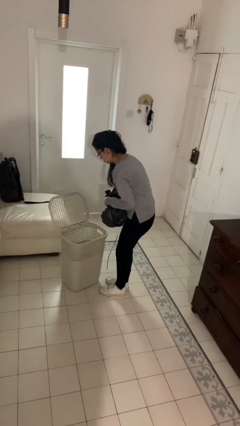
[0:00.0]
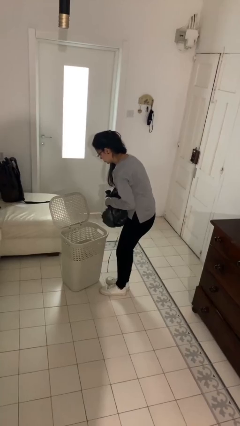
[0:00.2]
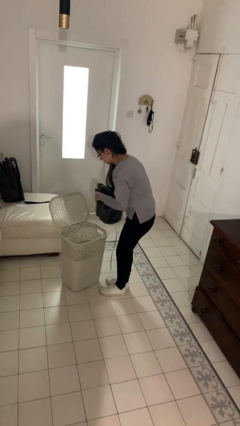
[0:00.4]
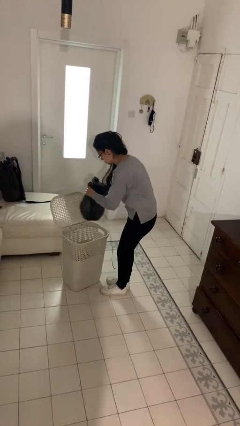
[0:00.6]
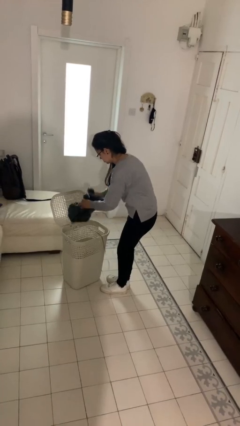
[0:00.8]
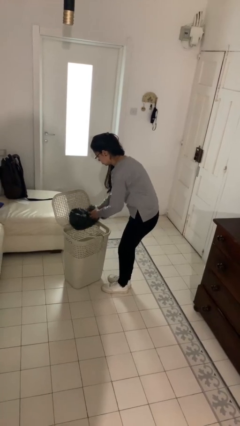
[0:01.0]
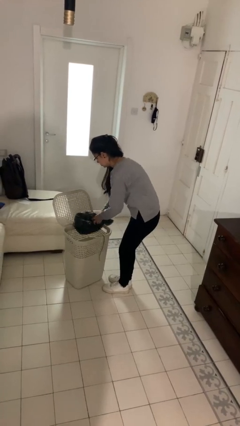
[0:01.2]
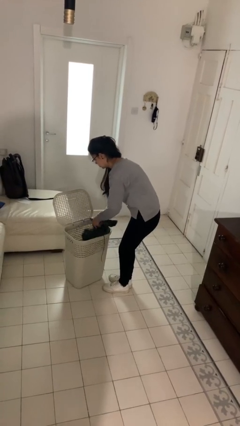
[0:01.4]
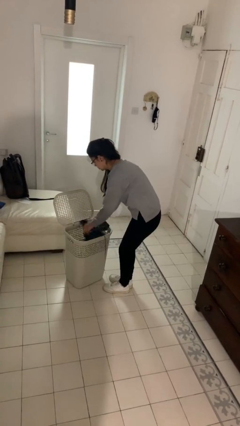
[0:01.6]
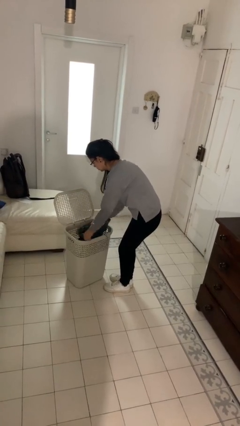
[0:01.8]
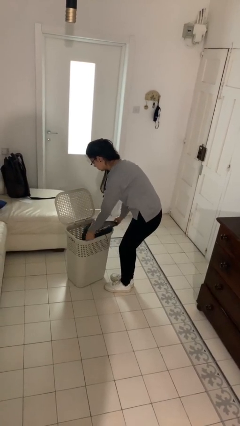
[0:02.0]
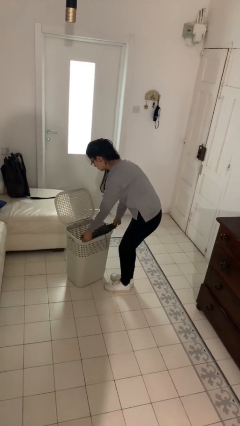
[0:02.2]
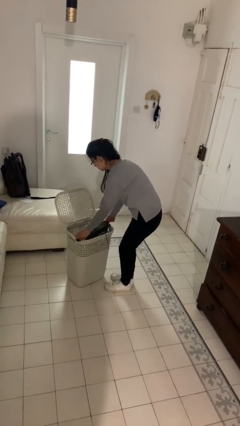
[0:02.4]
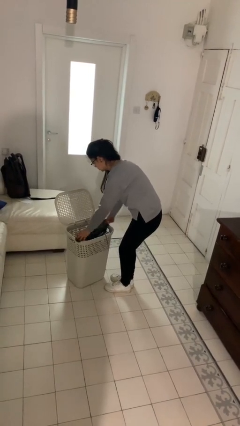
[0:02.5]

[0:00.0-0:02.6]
person inserts trashbag into trashcan

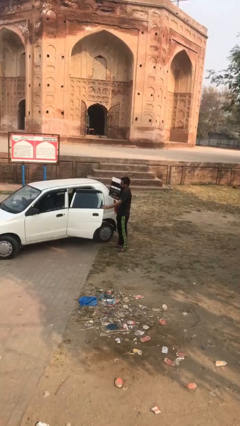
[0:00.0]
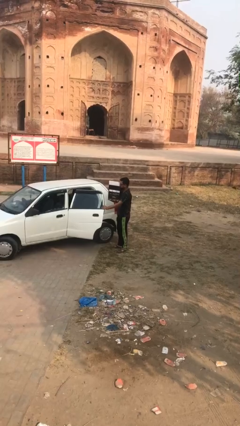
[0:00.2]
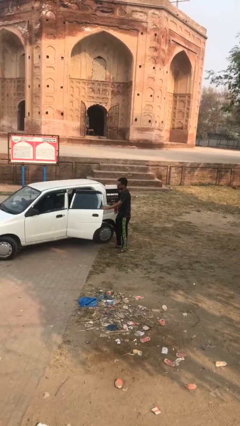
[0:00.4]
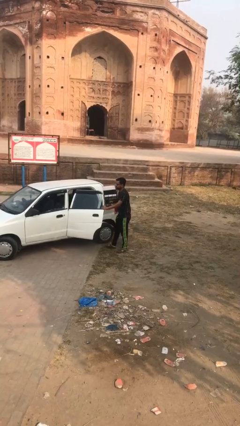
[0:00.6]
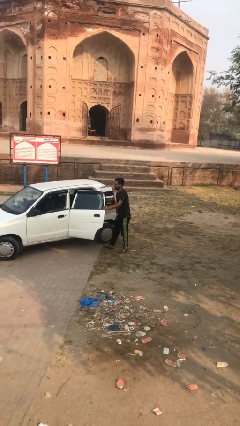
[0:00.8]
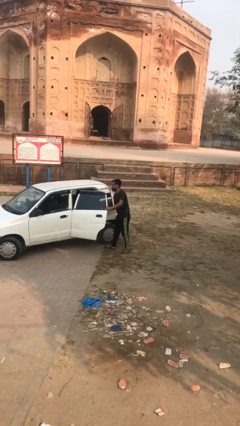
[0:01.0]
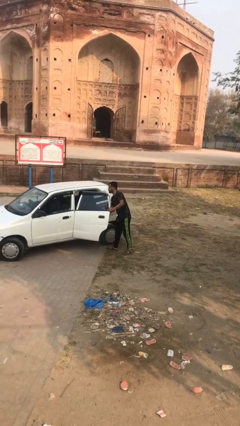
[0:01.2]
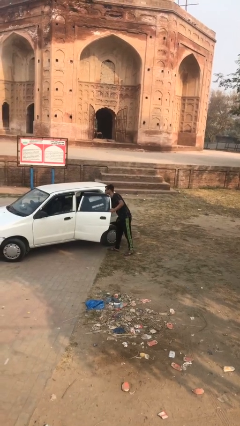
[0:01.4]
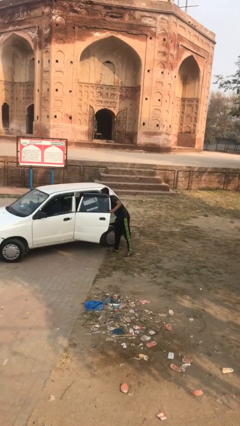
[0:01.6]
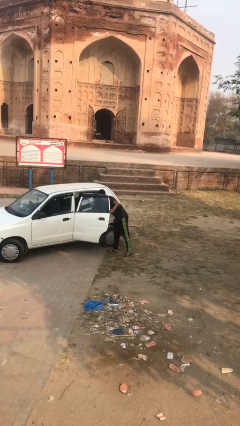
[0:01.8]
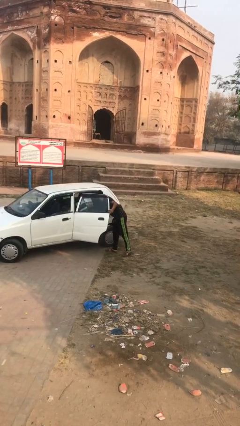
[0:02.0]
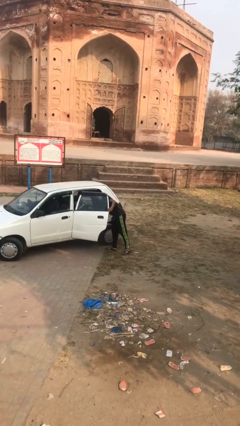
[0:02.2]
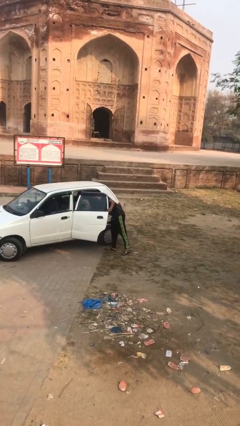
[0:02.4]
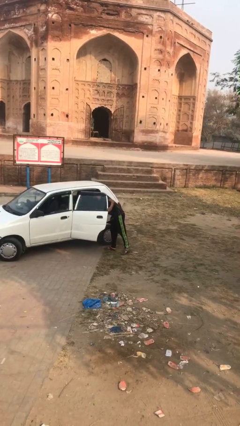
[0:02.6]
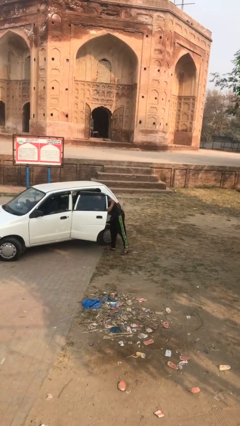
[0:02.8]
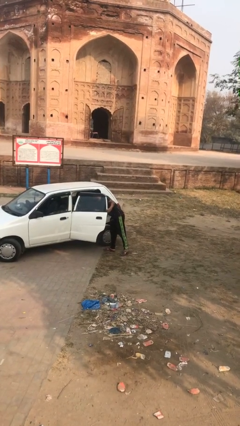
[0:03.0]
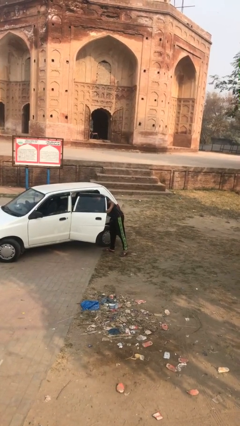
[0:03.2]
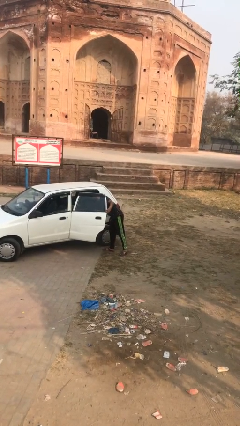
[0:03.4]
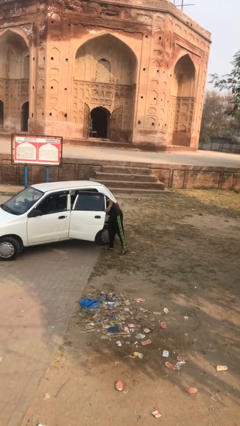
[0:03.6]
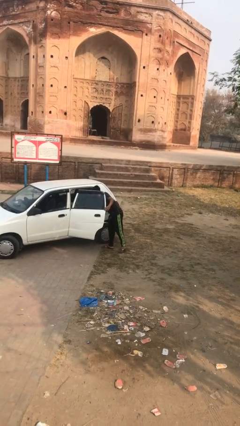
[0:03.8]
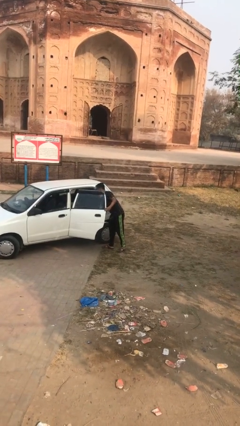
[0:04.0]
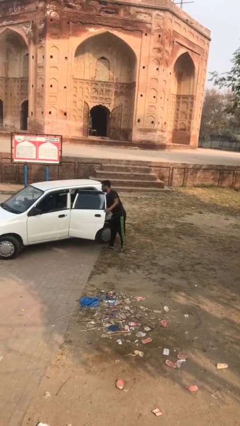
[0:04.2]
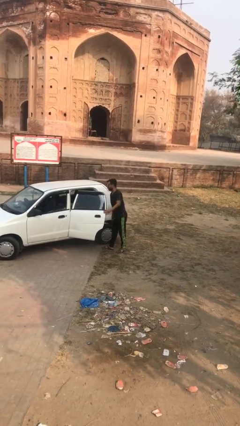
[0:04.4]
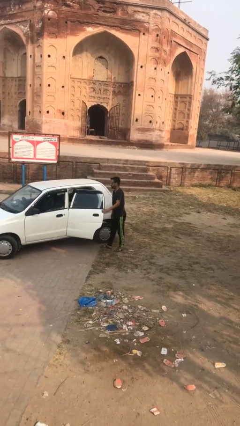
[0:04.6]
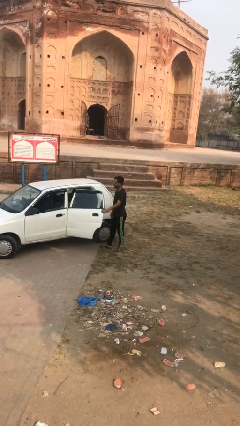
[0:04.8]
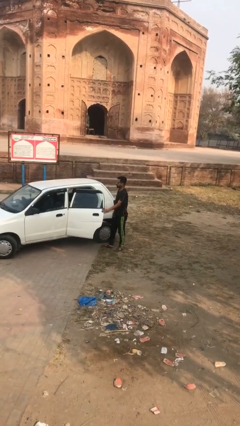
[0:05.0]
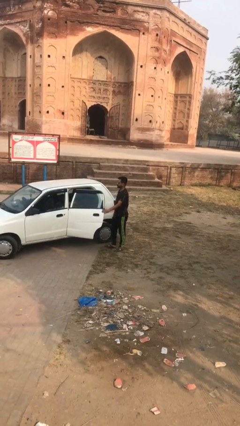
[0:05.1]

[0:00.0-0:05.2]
person loads car

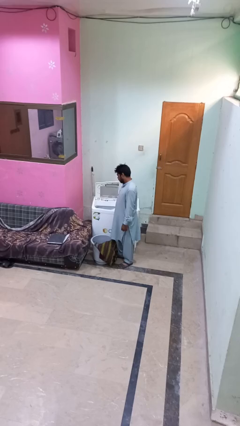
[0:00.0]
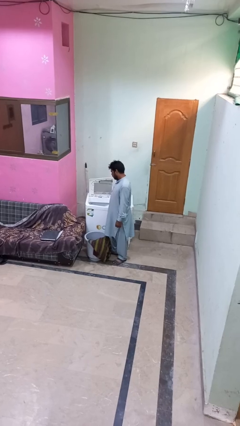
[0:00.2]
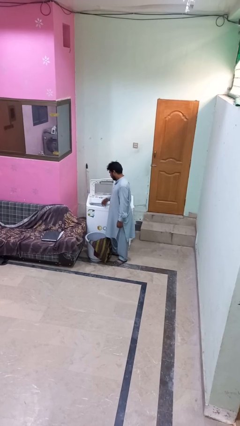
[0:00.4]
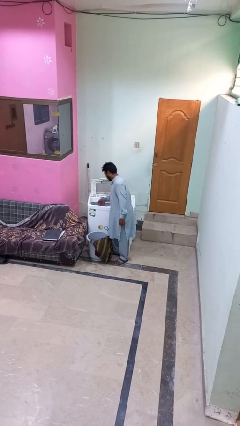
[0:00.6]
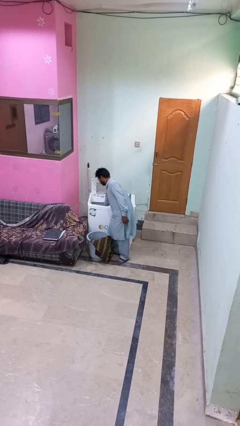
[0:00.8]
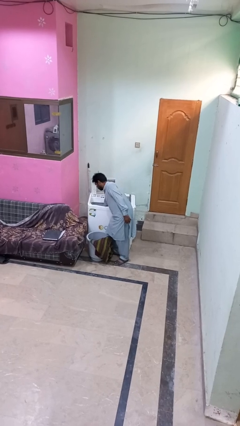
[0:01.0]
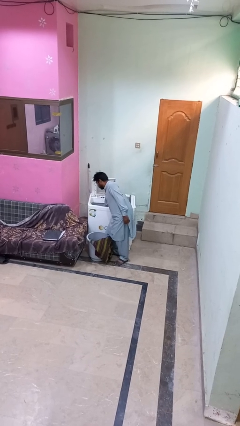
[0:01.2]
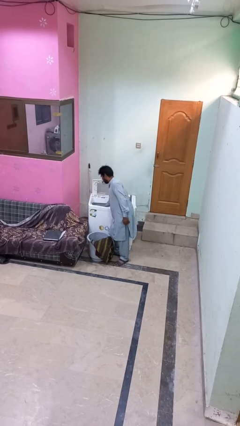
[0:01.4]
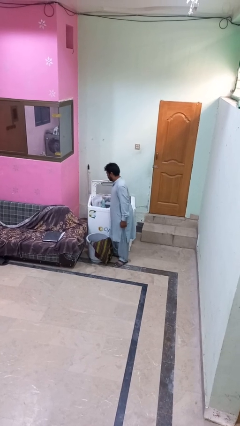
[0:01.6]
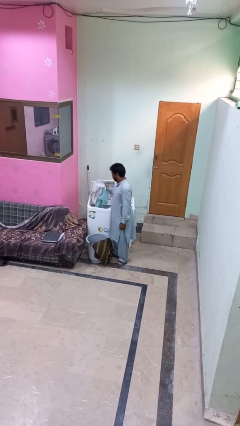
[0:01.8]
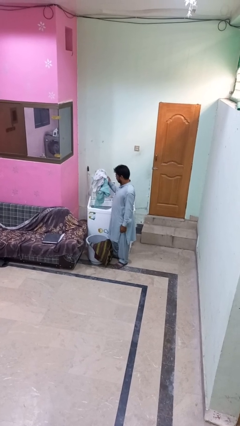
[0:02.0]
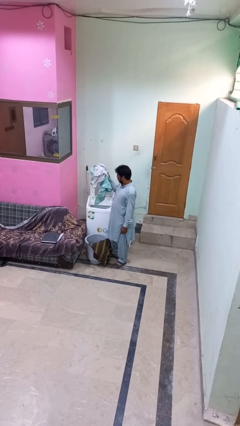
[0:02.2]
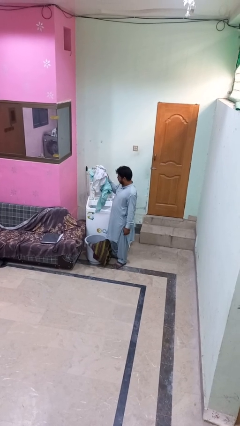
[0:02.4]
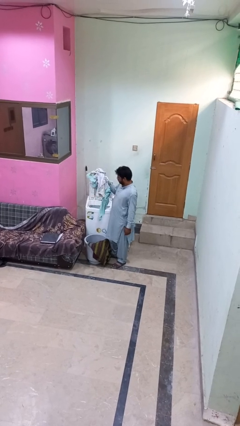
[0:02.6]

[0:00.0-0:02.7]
person unloads clotheswasher

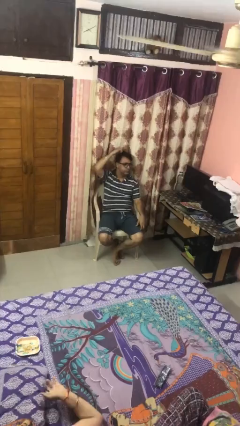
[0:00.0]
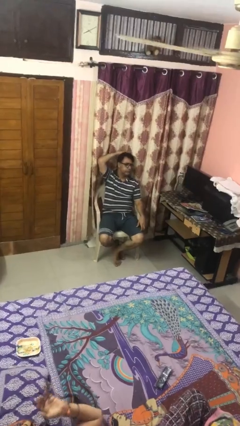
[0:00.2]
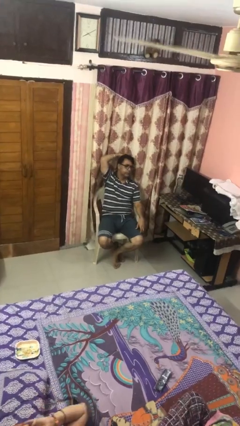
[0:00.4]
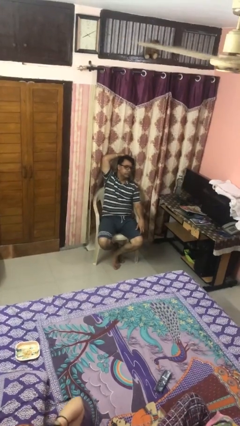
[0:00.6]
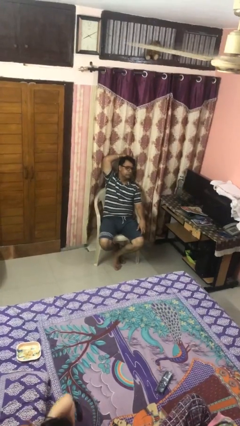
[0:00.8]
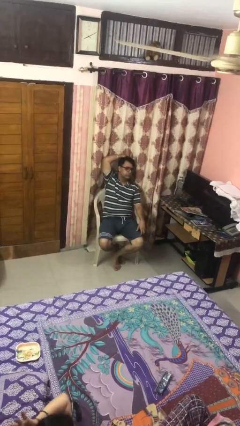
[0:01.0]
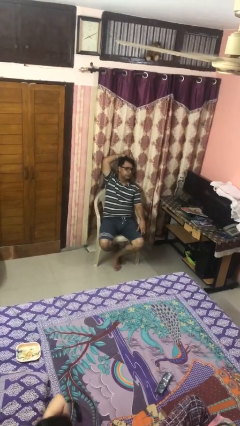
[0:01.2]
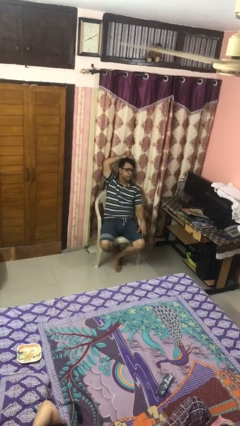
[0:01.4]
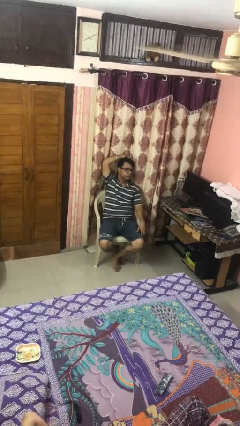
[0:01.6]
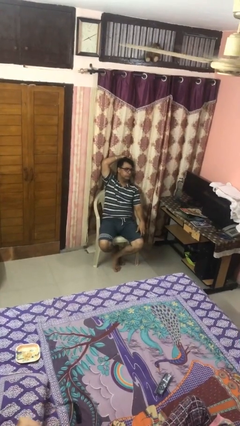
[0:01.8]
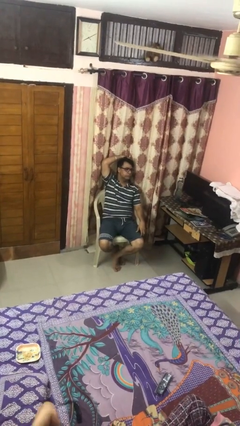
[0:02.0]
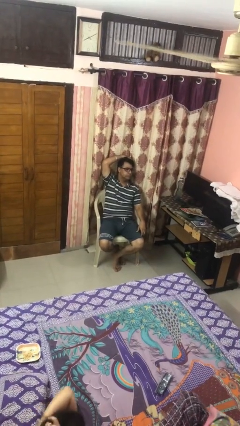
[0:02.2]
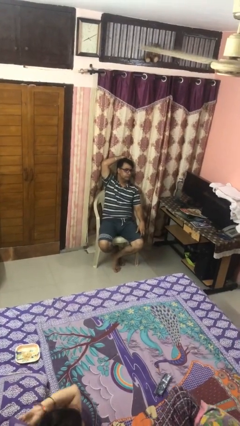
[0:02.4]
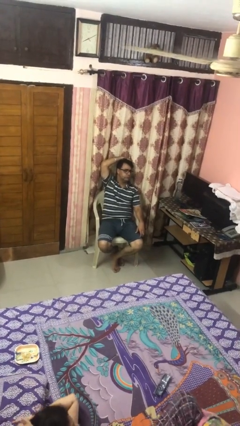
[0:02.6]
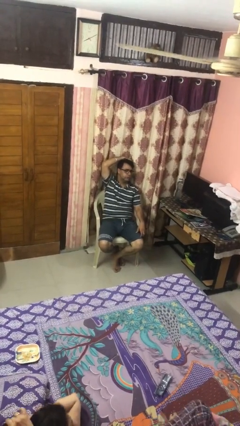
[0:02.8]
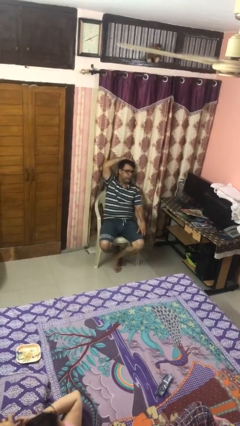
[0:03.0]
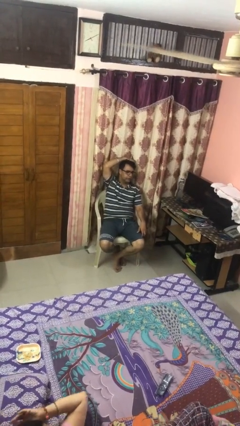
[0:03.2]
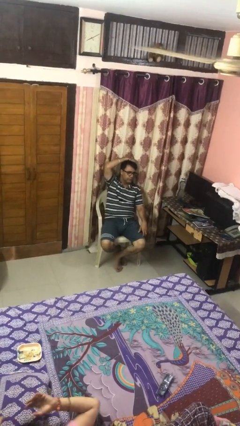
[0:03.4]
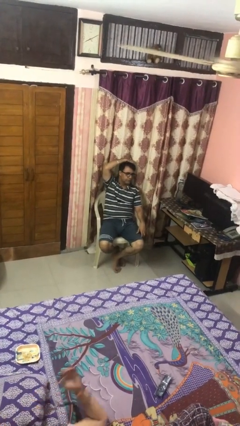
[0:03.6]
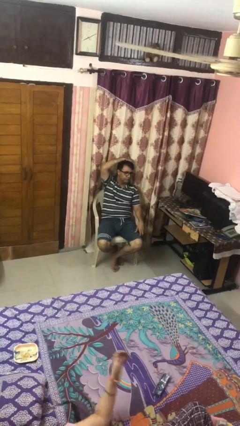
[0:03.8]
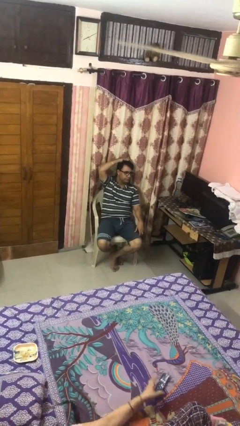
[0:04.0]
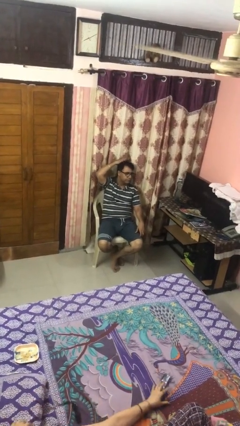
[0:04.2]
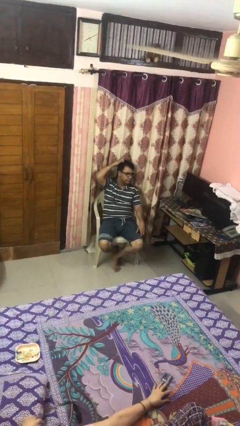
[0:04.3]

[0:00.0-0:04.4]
person scratches face

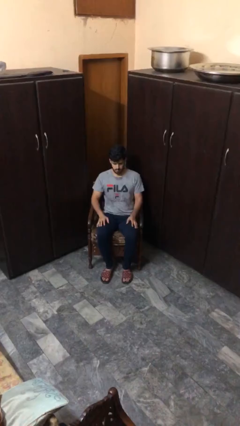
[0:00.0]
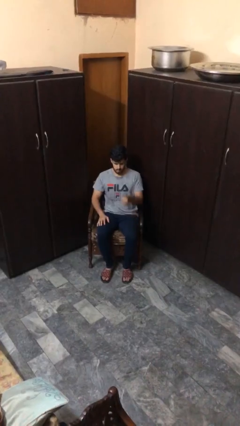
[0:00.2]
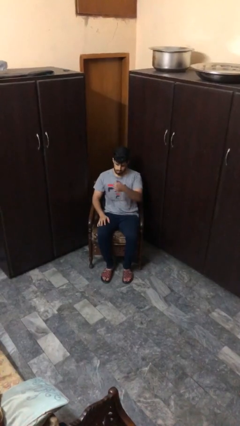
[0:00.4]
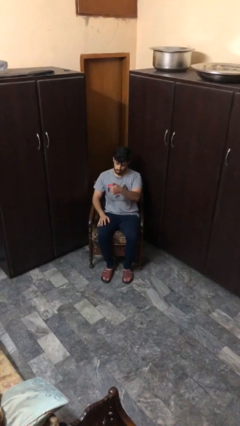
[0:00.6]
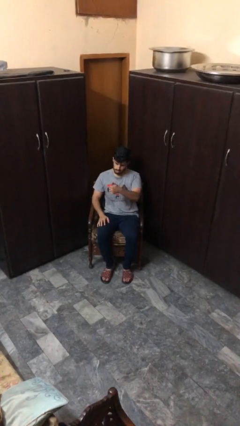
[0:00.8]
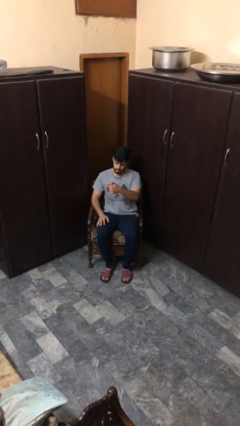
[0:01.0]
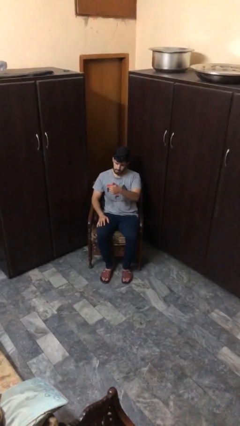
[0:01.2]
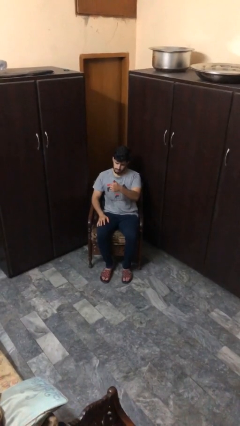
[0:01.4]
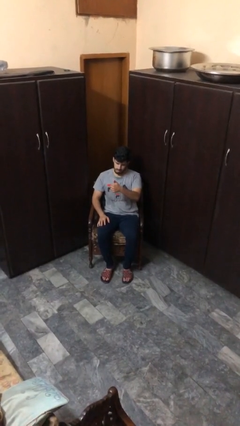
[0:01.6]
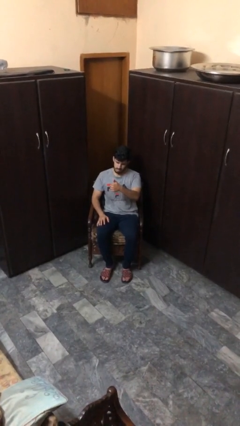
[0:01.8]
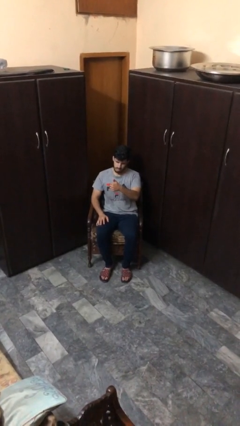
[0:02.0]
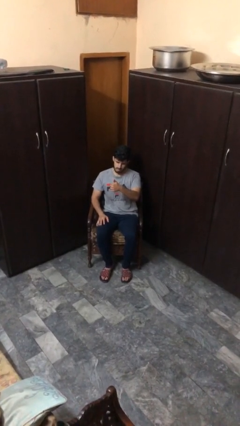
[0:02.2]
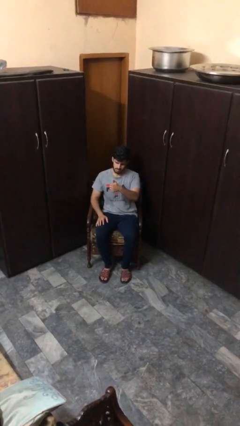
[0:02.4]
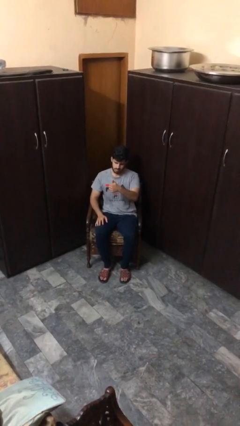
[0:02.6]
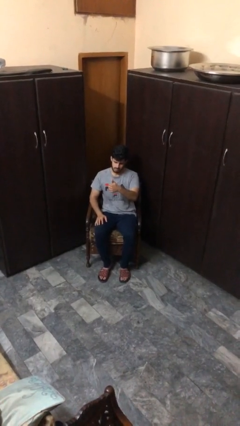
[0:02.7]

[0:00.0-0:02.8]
person gestures thumbs up
